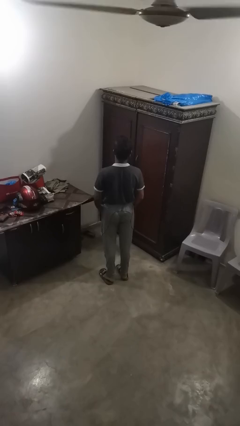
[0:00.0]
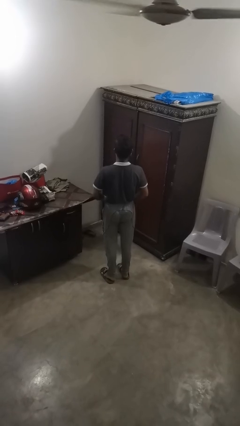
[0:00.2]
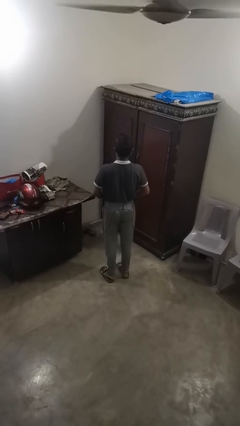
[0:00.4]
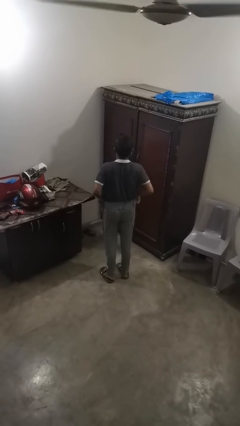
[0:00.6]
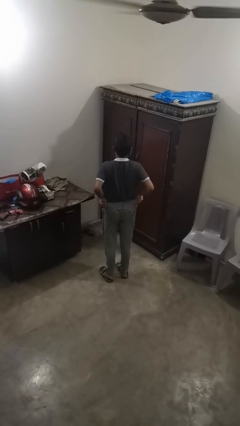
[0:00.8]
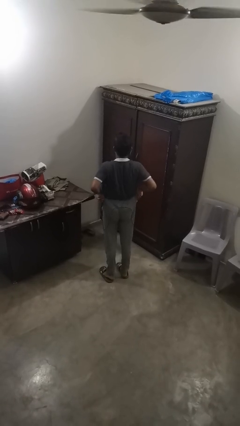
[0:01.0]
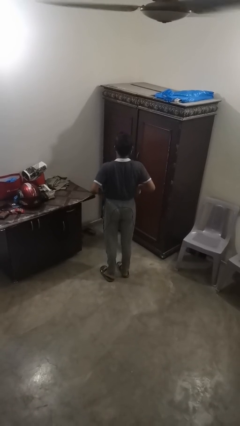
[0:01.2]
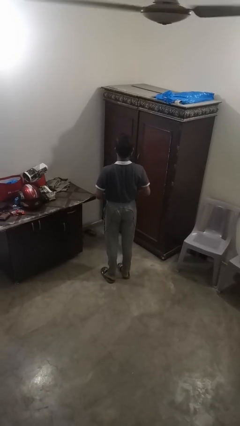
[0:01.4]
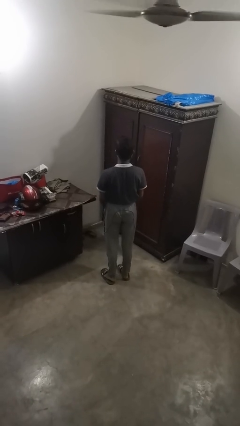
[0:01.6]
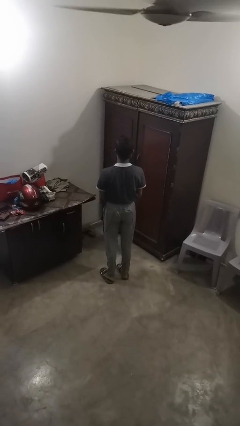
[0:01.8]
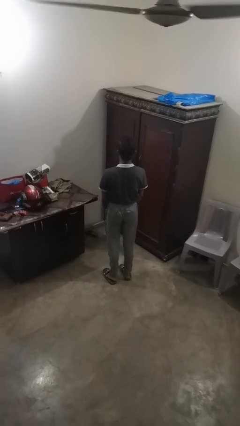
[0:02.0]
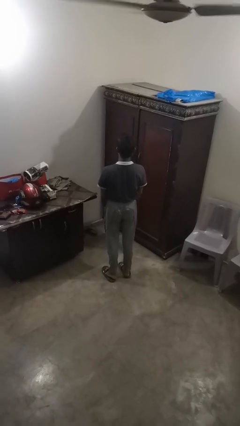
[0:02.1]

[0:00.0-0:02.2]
person hikes up pants

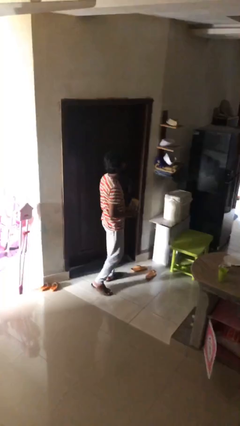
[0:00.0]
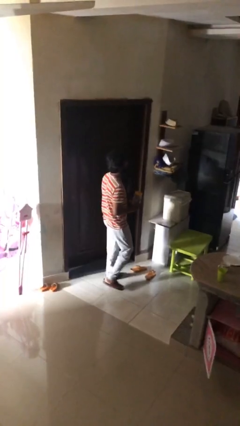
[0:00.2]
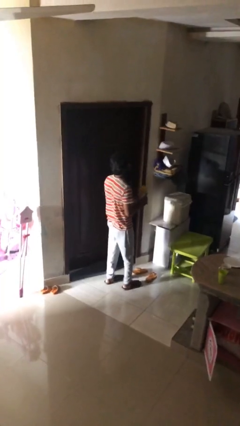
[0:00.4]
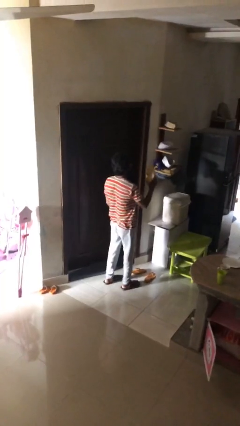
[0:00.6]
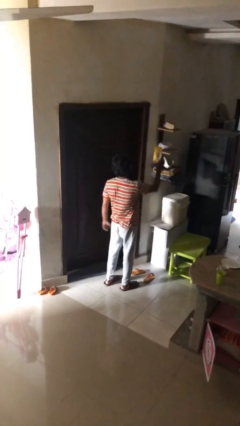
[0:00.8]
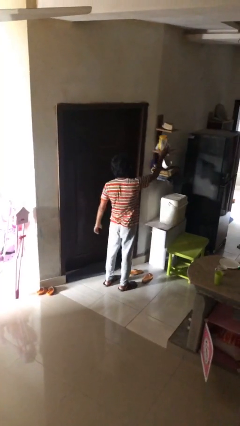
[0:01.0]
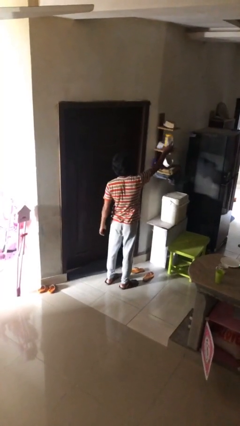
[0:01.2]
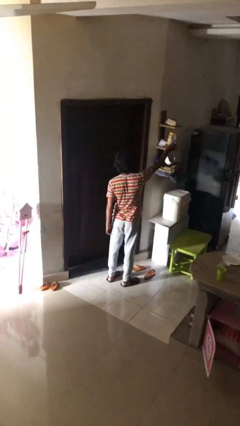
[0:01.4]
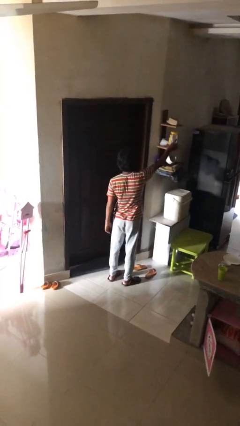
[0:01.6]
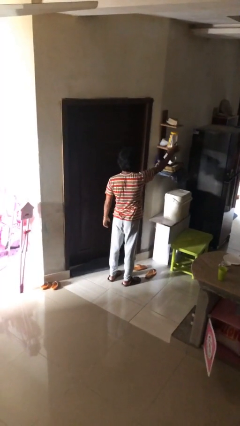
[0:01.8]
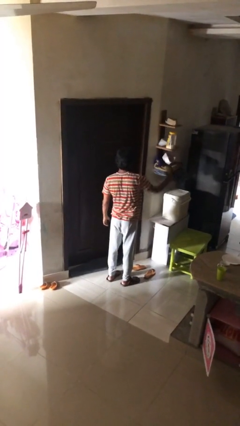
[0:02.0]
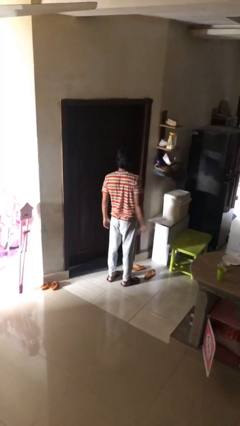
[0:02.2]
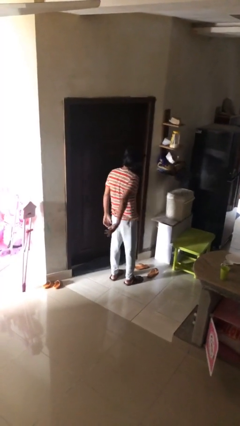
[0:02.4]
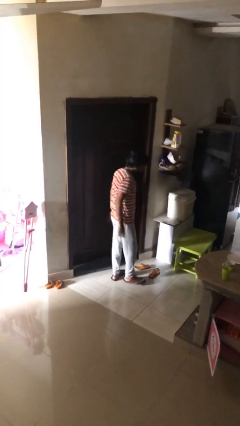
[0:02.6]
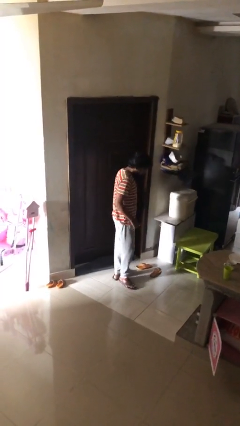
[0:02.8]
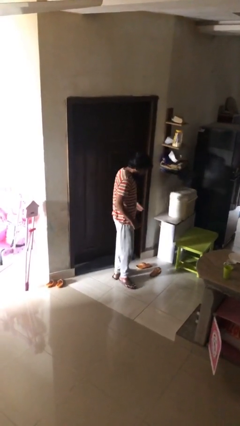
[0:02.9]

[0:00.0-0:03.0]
person puts down object on shelf

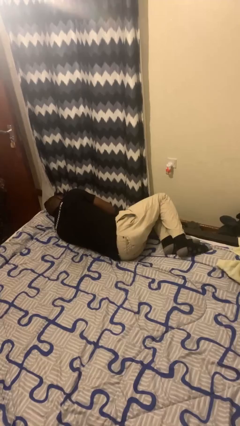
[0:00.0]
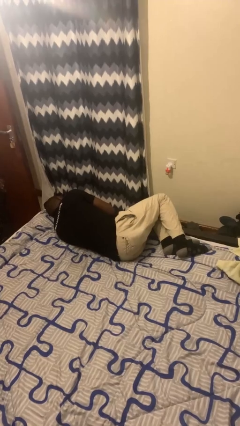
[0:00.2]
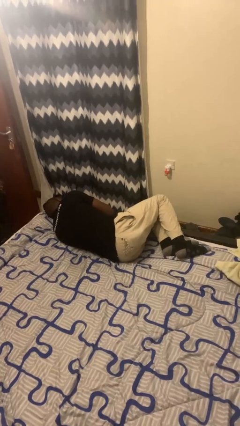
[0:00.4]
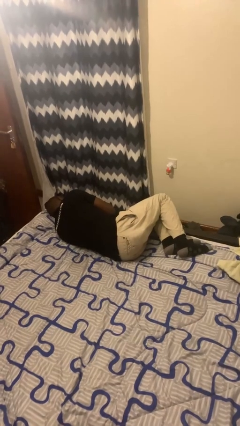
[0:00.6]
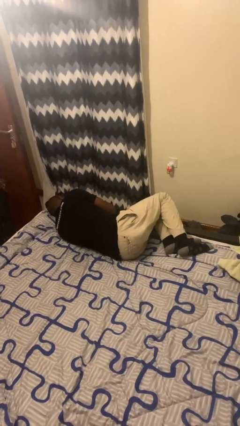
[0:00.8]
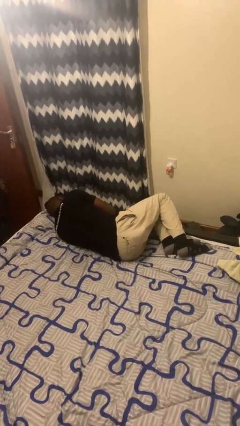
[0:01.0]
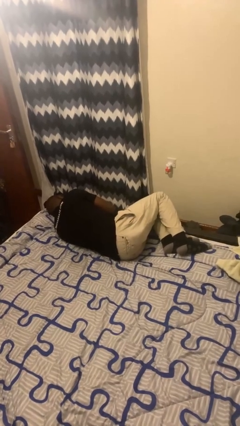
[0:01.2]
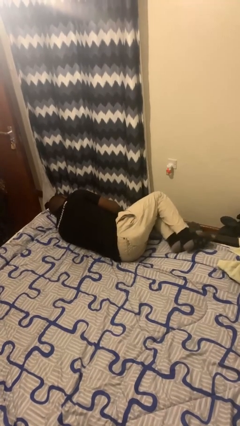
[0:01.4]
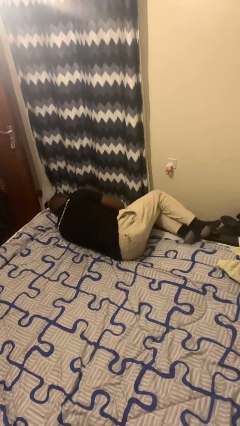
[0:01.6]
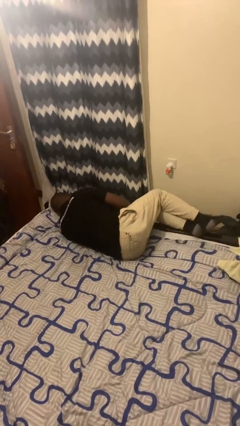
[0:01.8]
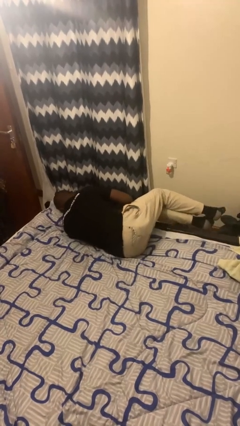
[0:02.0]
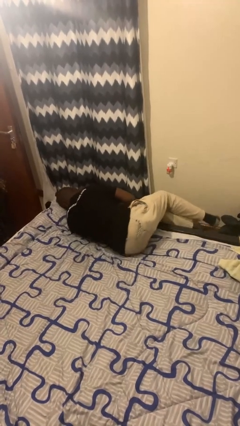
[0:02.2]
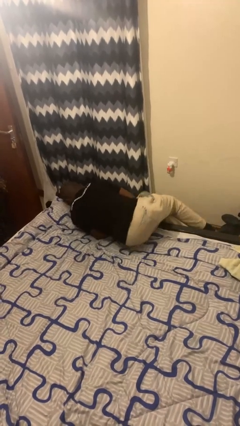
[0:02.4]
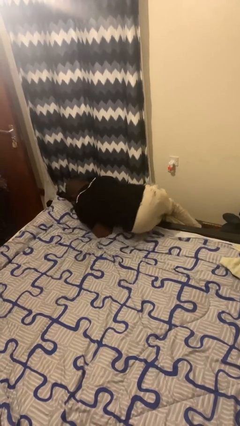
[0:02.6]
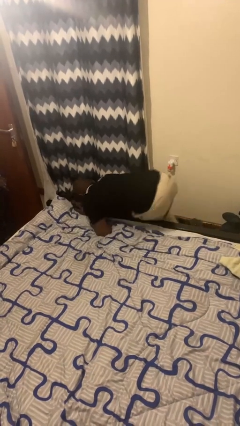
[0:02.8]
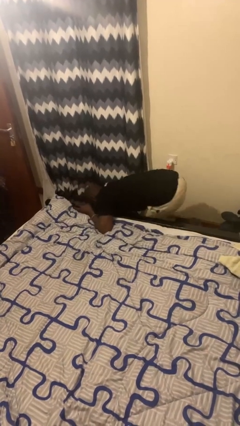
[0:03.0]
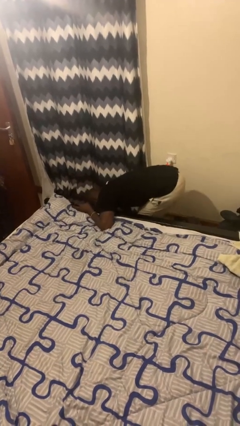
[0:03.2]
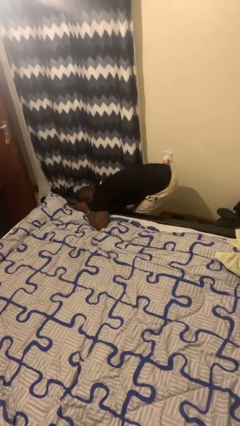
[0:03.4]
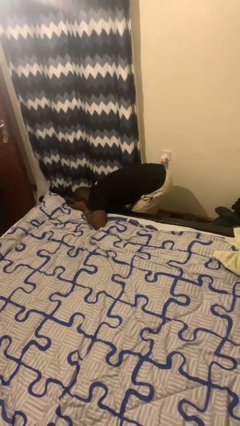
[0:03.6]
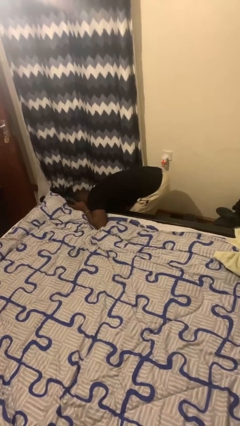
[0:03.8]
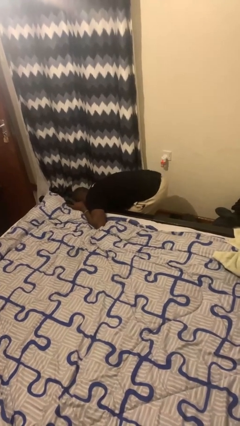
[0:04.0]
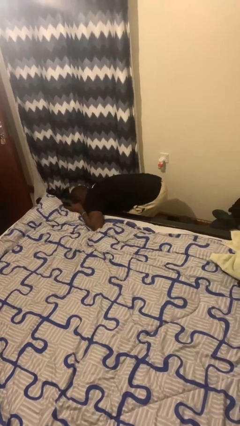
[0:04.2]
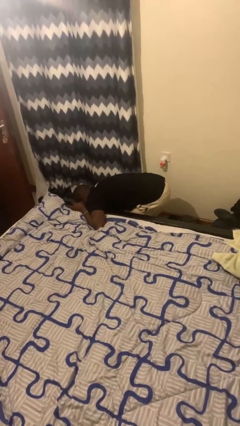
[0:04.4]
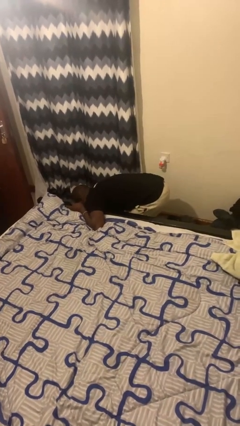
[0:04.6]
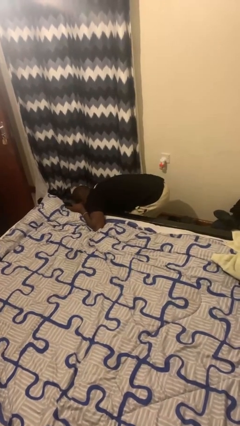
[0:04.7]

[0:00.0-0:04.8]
person falls from bed

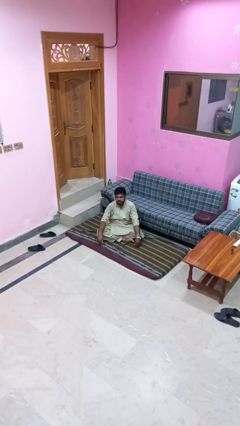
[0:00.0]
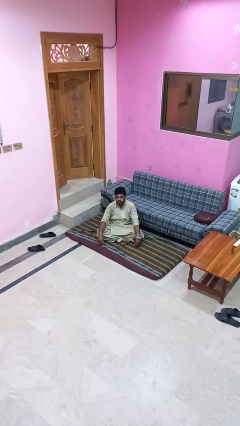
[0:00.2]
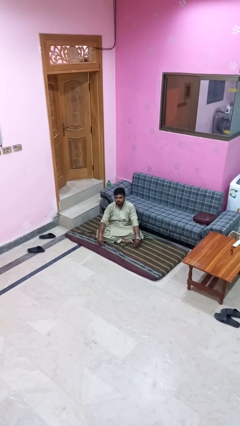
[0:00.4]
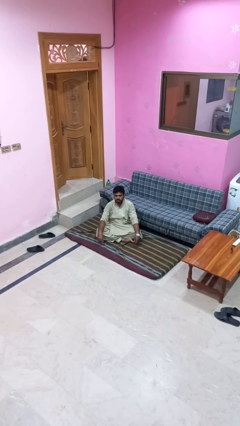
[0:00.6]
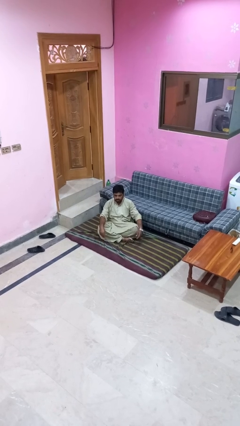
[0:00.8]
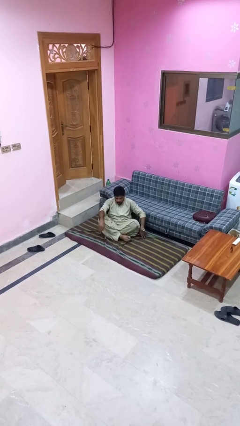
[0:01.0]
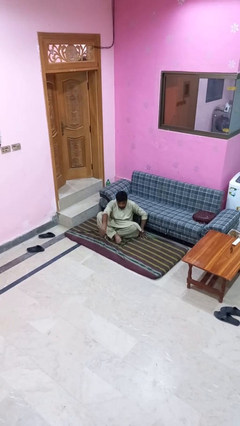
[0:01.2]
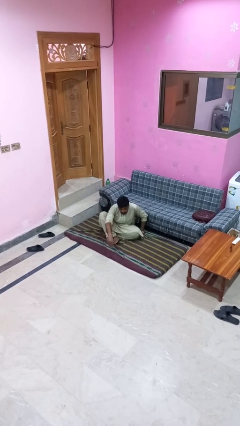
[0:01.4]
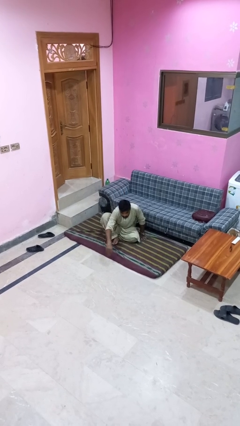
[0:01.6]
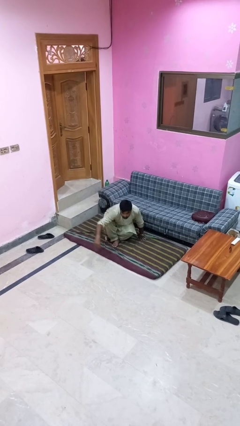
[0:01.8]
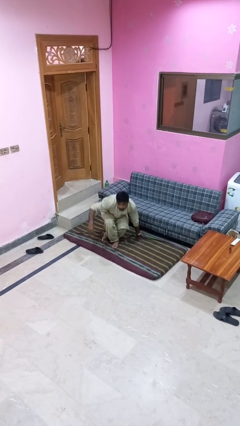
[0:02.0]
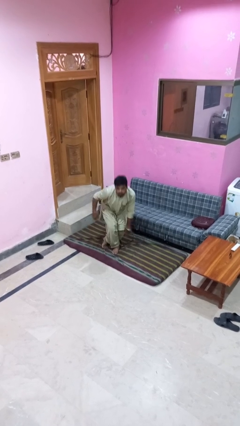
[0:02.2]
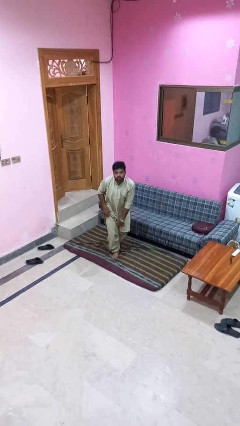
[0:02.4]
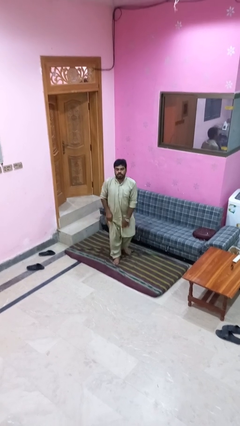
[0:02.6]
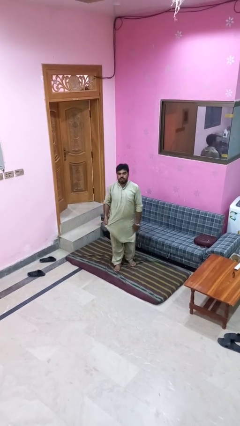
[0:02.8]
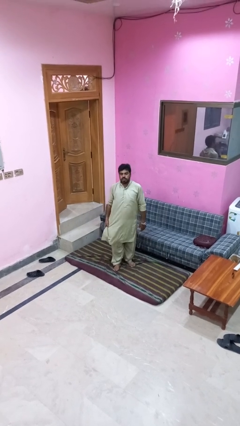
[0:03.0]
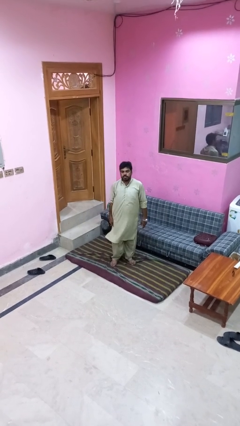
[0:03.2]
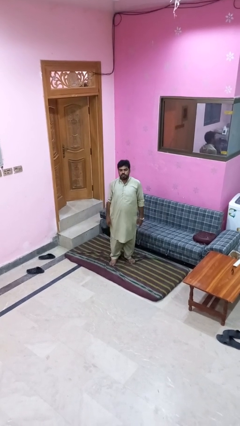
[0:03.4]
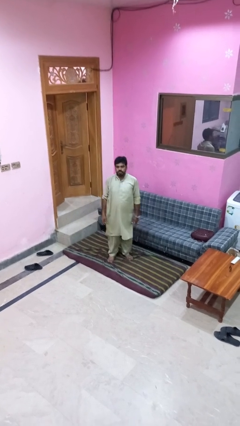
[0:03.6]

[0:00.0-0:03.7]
person stands up from floor

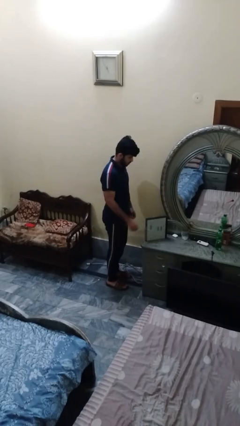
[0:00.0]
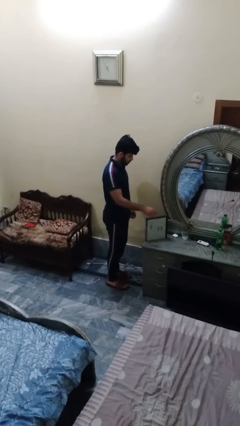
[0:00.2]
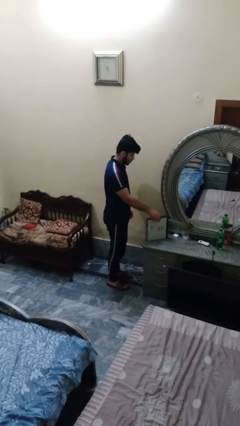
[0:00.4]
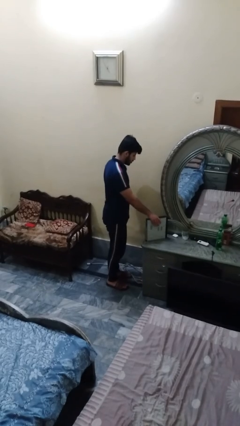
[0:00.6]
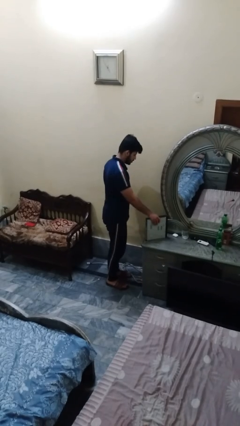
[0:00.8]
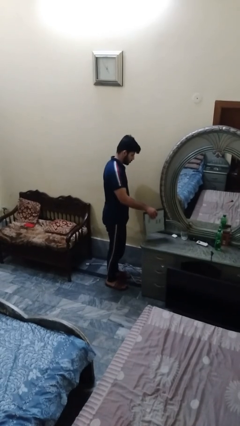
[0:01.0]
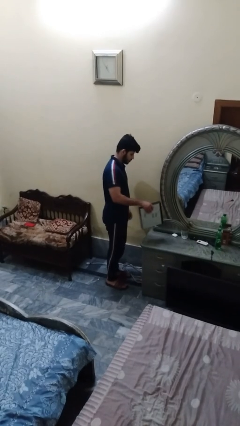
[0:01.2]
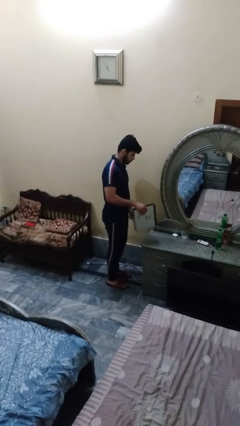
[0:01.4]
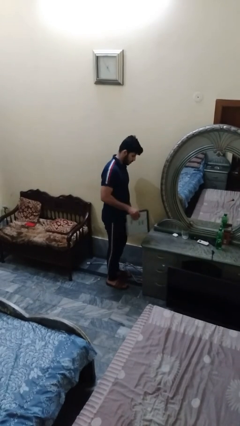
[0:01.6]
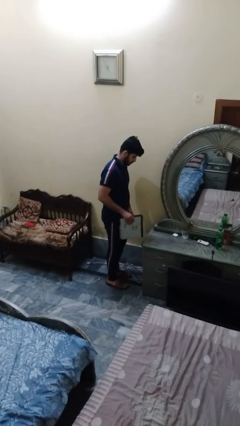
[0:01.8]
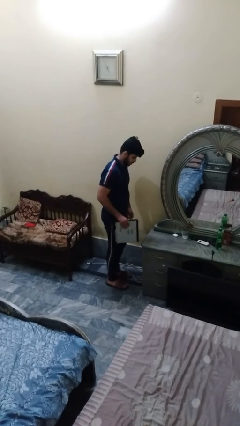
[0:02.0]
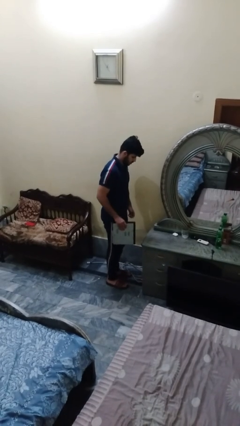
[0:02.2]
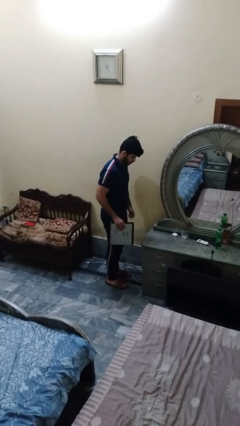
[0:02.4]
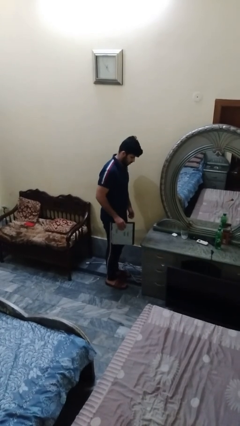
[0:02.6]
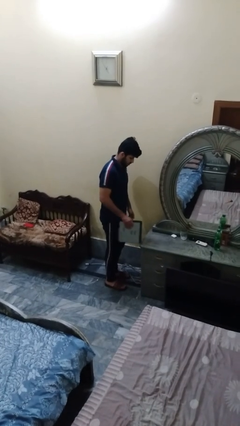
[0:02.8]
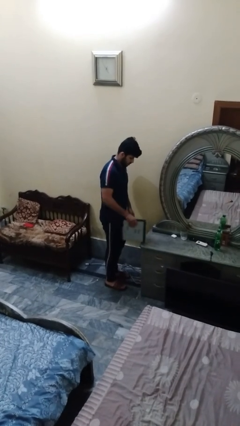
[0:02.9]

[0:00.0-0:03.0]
person picks up object from countertop

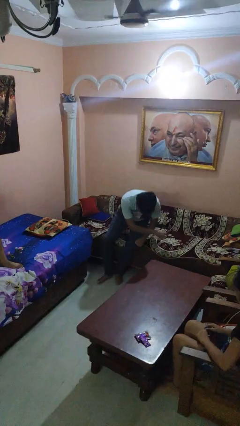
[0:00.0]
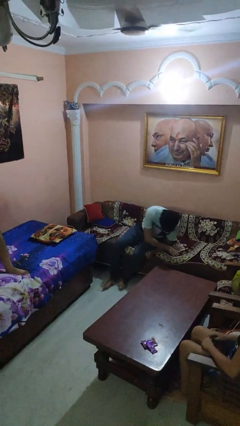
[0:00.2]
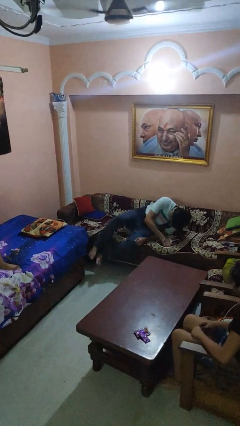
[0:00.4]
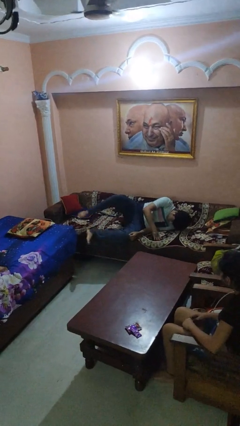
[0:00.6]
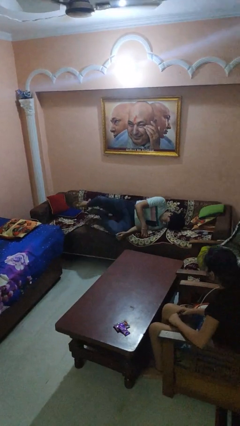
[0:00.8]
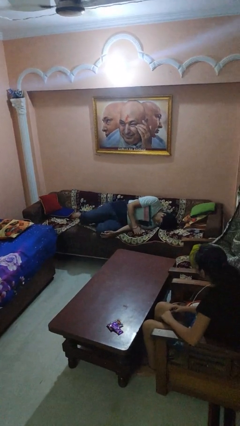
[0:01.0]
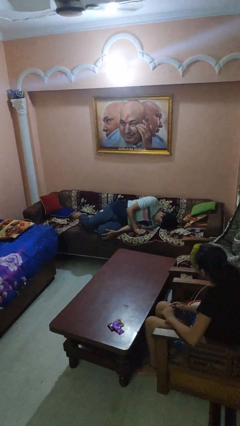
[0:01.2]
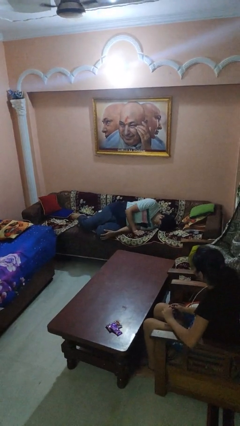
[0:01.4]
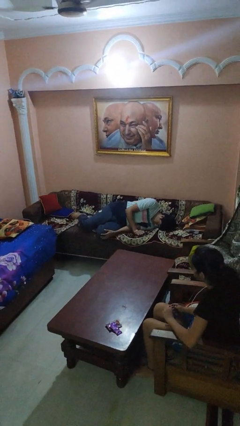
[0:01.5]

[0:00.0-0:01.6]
person lies down on couch
